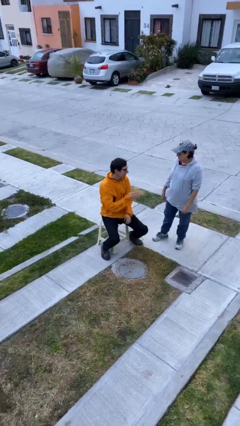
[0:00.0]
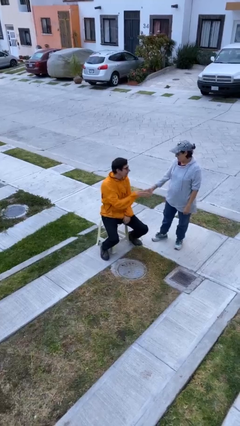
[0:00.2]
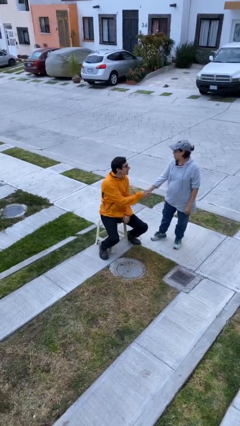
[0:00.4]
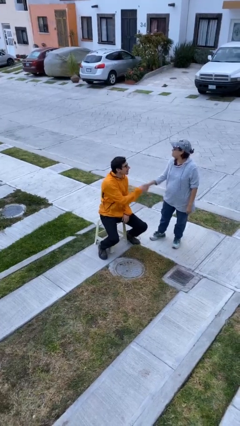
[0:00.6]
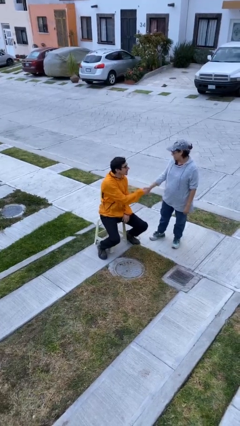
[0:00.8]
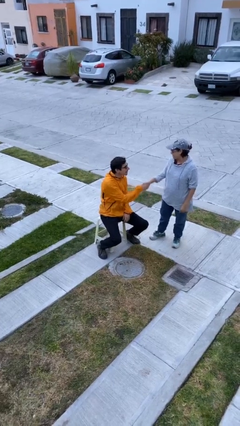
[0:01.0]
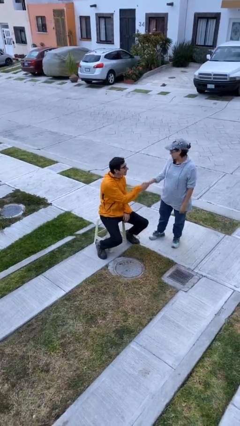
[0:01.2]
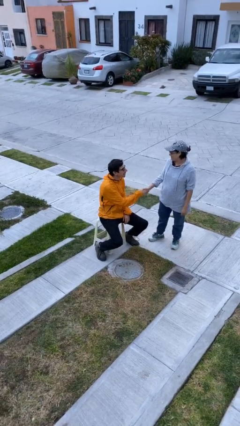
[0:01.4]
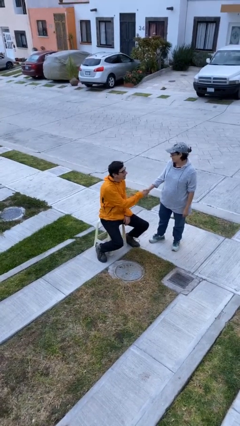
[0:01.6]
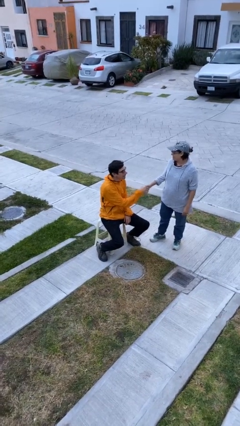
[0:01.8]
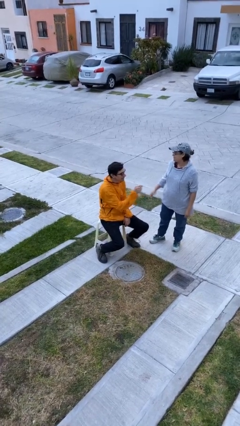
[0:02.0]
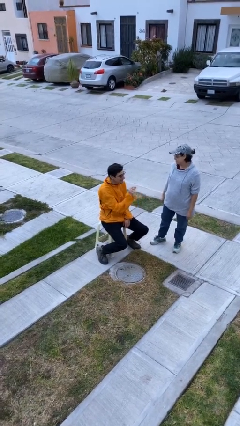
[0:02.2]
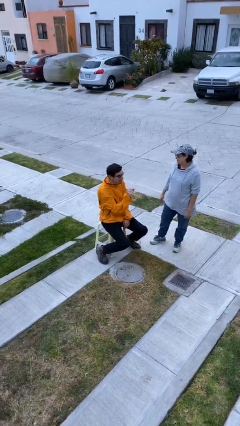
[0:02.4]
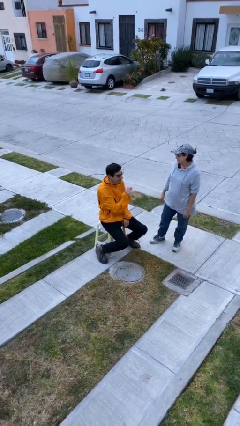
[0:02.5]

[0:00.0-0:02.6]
person shakes hand

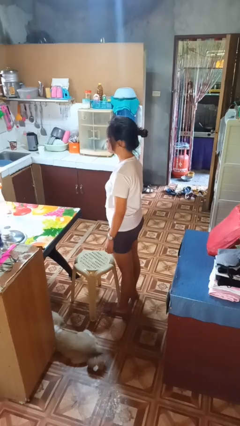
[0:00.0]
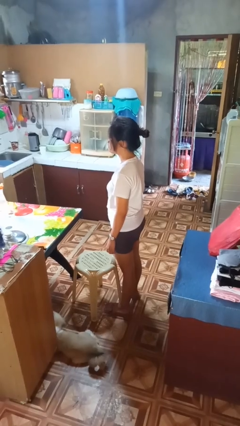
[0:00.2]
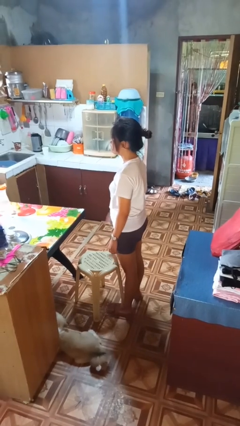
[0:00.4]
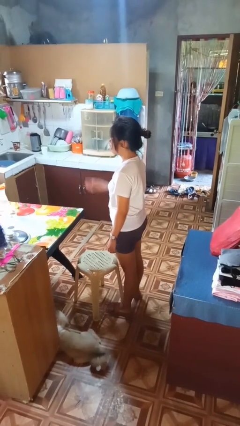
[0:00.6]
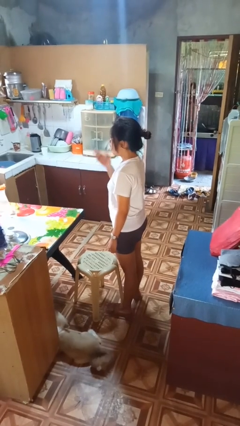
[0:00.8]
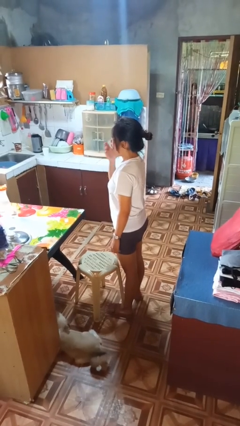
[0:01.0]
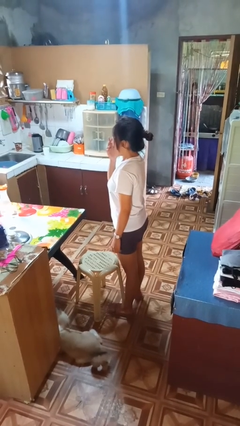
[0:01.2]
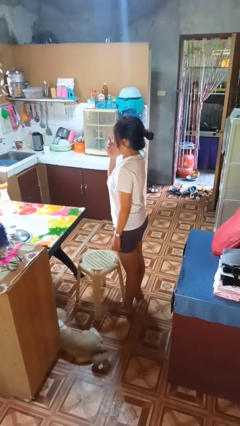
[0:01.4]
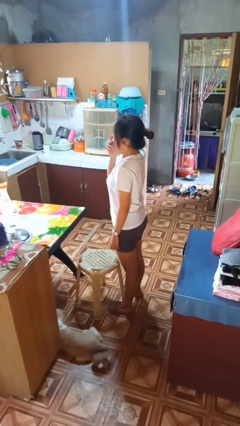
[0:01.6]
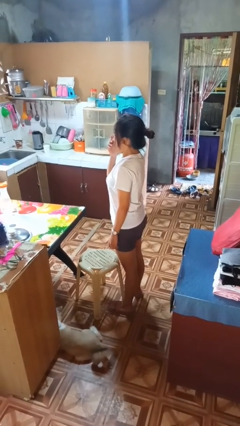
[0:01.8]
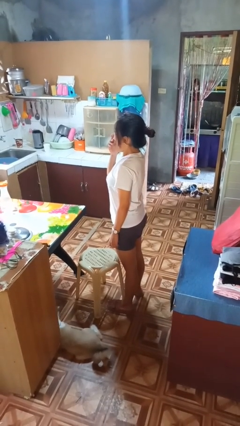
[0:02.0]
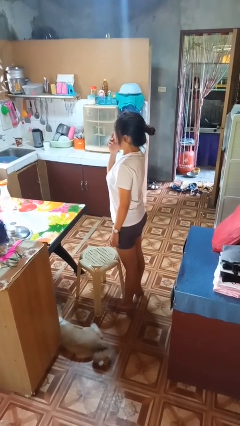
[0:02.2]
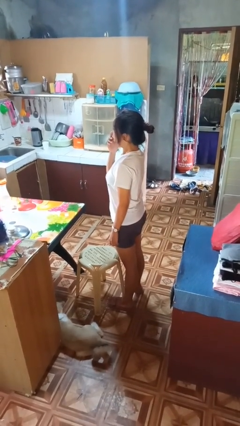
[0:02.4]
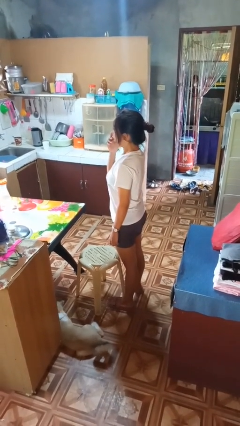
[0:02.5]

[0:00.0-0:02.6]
person yawns

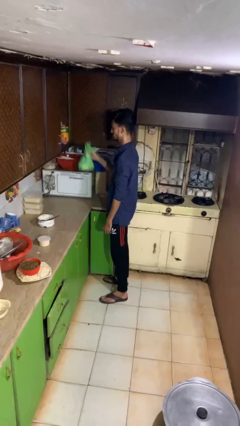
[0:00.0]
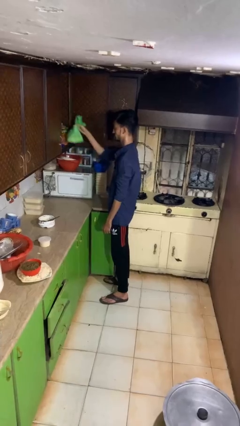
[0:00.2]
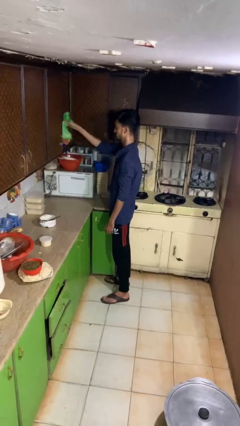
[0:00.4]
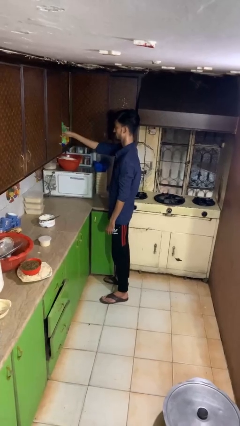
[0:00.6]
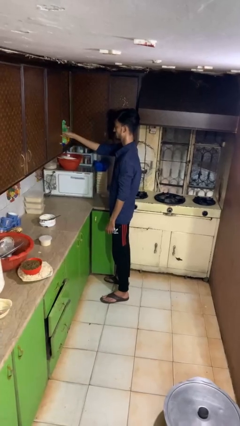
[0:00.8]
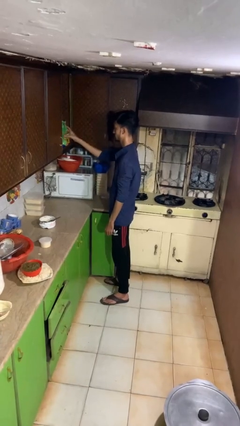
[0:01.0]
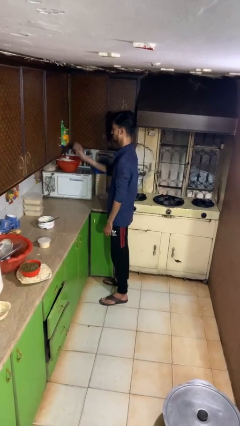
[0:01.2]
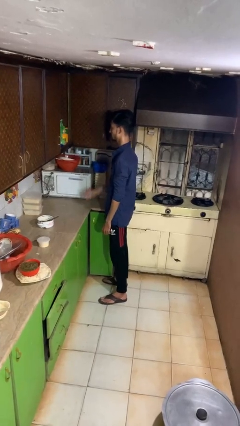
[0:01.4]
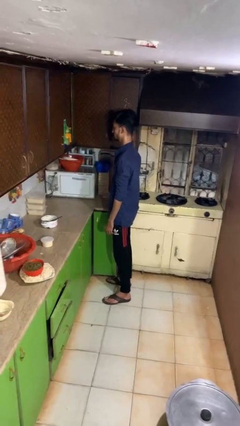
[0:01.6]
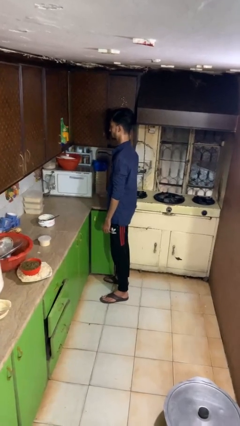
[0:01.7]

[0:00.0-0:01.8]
person loads groceries into cabinet

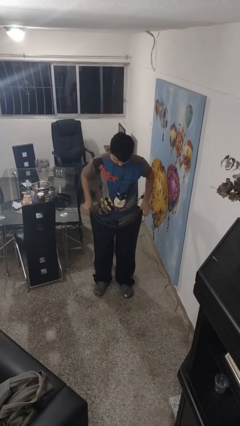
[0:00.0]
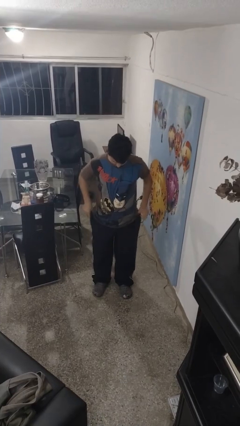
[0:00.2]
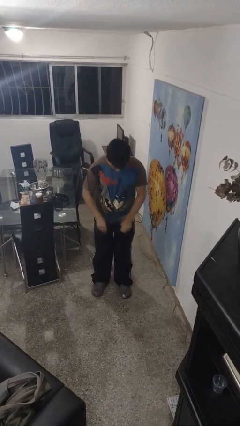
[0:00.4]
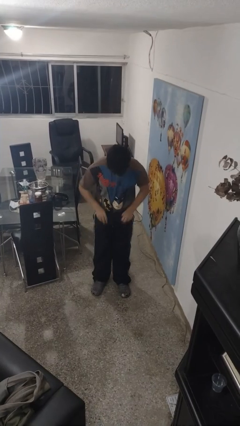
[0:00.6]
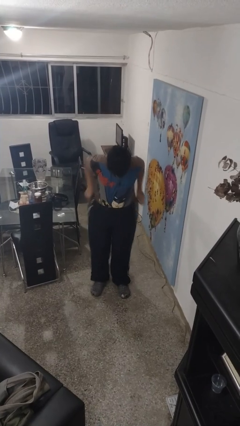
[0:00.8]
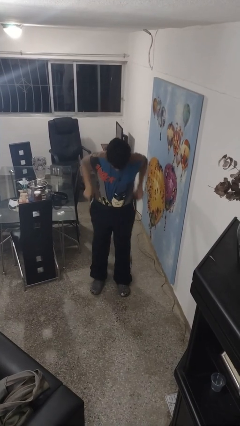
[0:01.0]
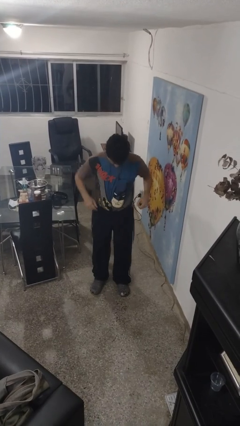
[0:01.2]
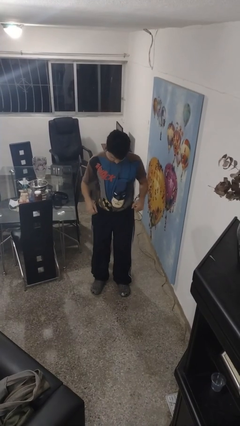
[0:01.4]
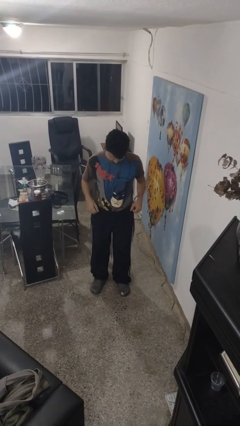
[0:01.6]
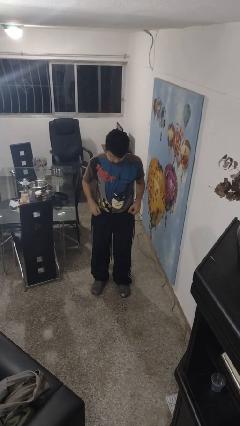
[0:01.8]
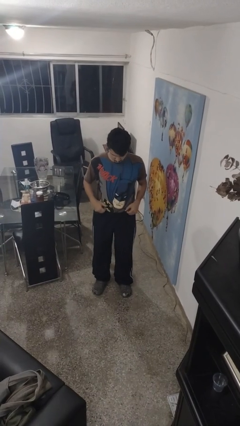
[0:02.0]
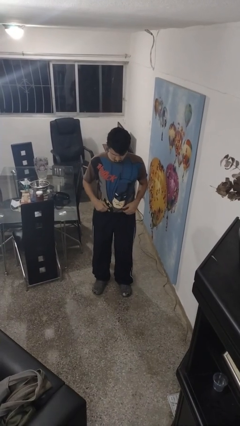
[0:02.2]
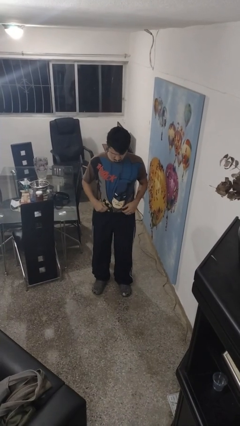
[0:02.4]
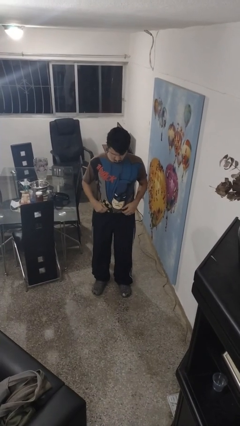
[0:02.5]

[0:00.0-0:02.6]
person tucks in shirt

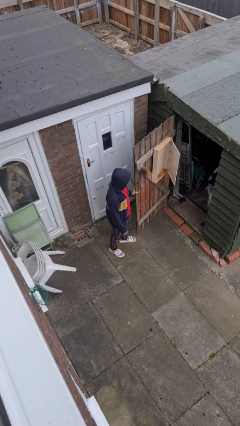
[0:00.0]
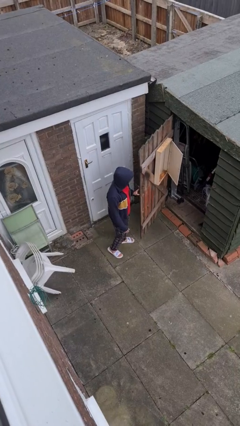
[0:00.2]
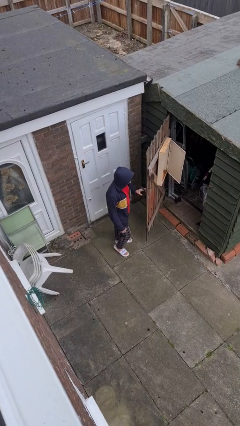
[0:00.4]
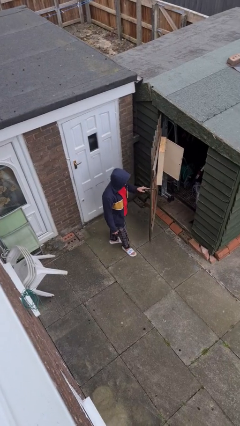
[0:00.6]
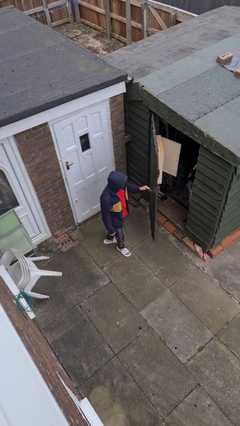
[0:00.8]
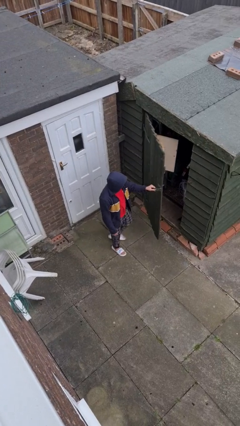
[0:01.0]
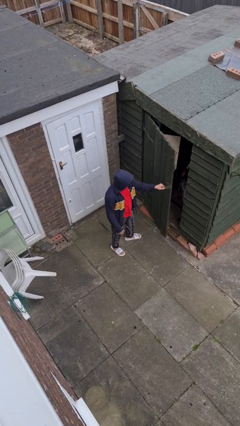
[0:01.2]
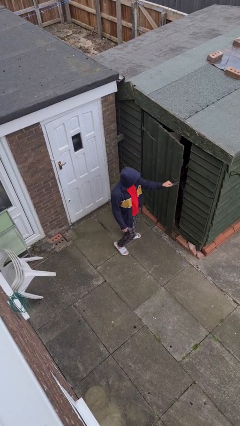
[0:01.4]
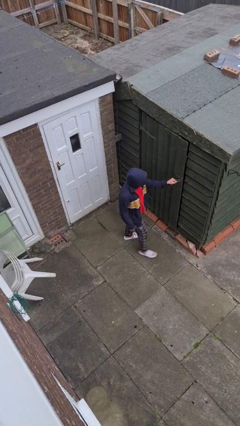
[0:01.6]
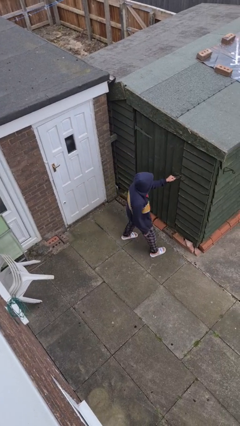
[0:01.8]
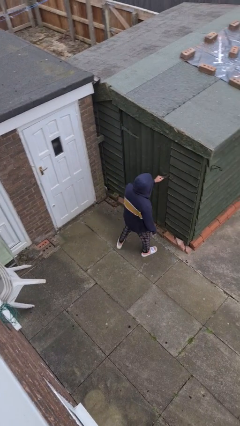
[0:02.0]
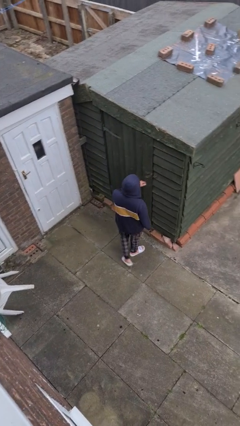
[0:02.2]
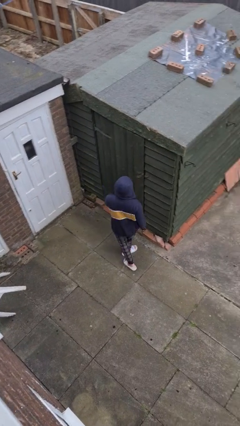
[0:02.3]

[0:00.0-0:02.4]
person closes facility door

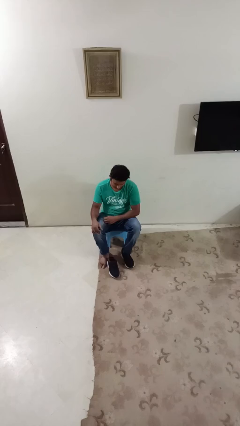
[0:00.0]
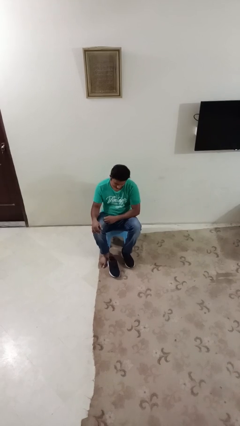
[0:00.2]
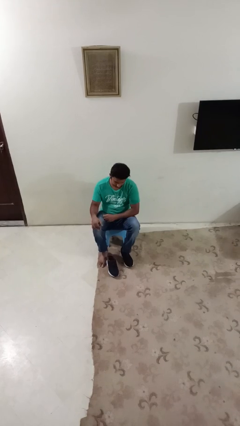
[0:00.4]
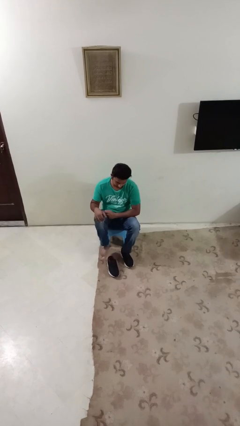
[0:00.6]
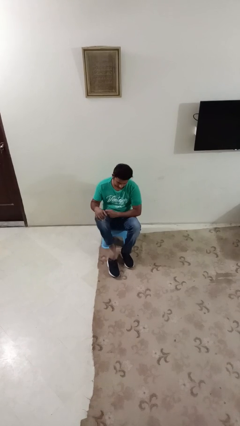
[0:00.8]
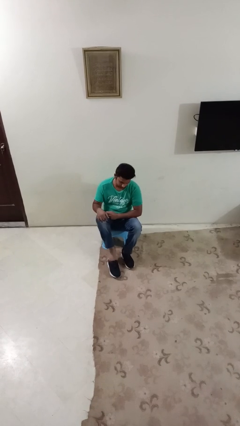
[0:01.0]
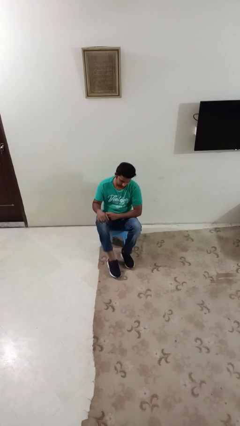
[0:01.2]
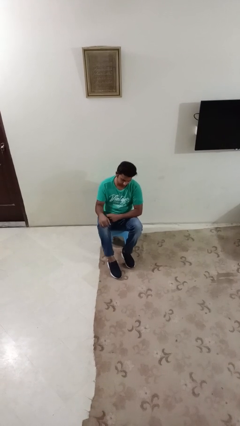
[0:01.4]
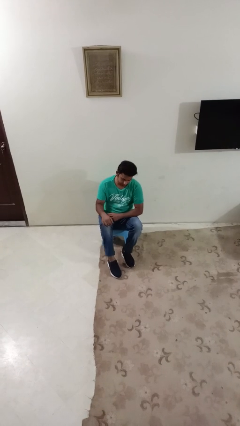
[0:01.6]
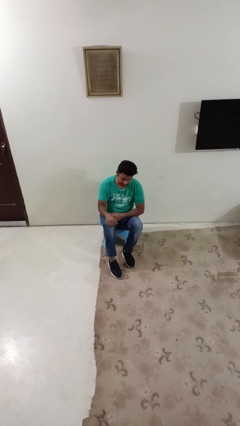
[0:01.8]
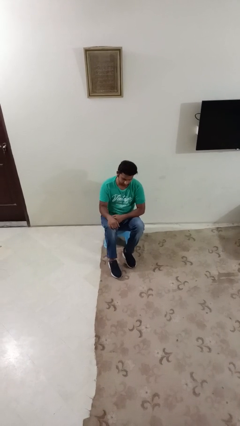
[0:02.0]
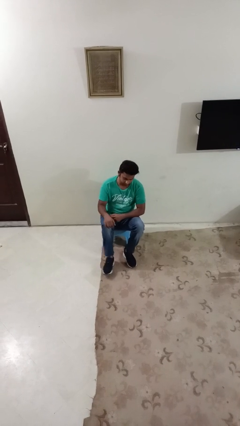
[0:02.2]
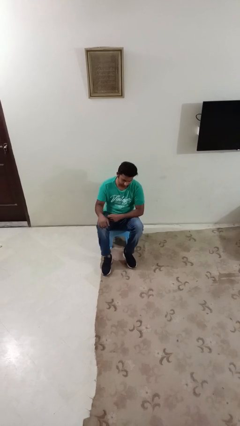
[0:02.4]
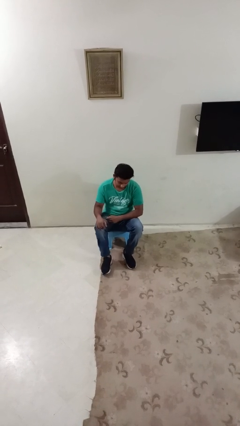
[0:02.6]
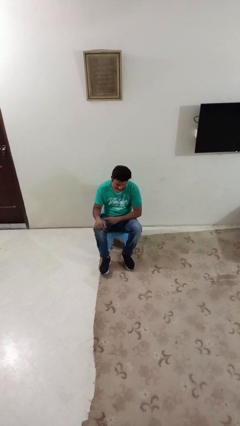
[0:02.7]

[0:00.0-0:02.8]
person puts on shoes

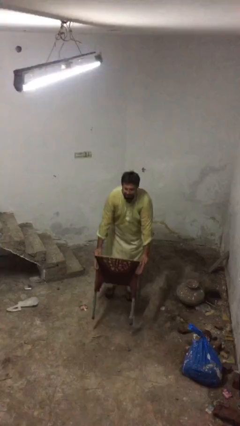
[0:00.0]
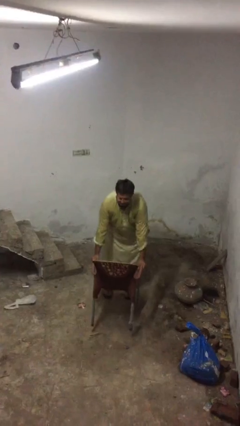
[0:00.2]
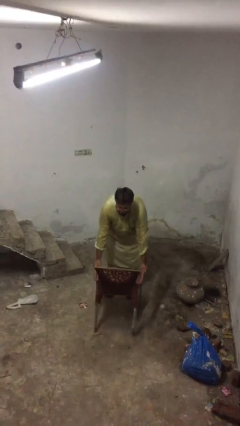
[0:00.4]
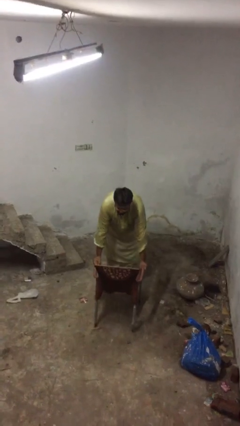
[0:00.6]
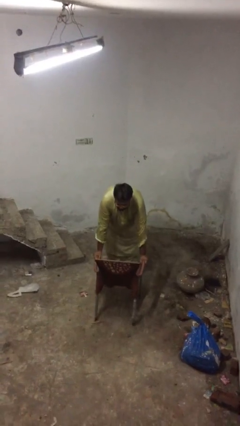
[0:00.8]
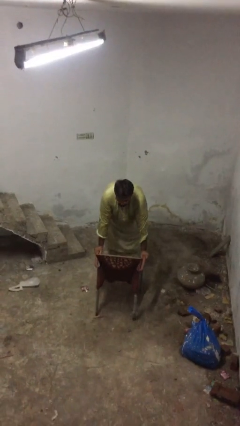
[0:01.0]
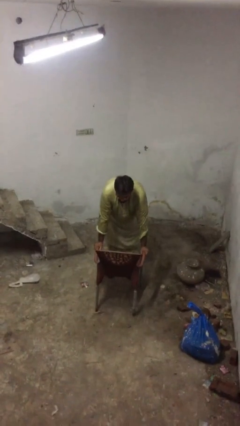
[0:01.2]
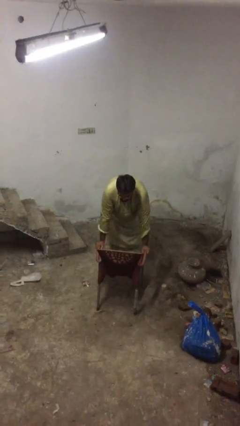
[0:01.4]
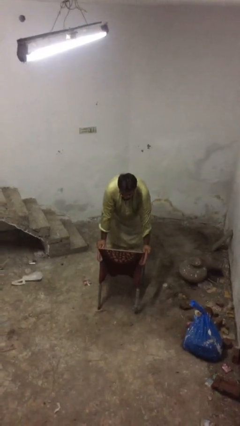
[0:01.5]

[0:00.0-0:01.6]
person puts down object on floor

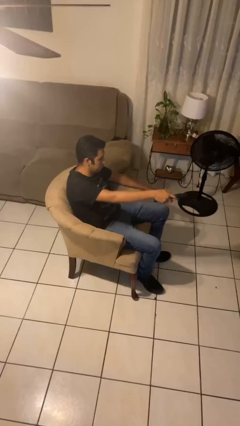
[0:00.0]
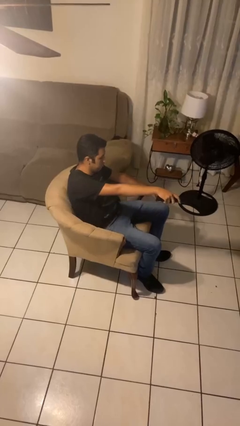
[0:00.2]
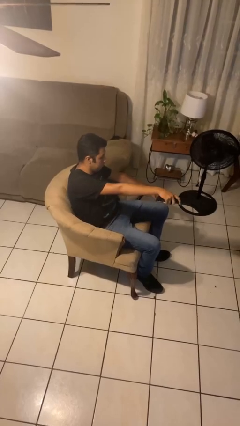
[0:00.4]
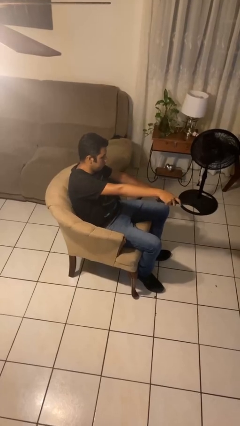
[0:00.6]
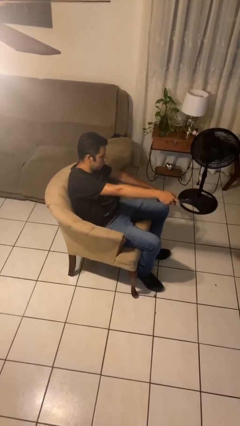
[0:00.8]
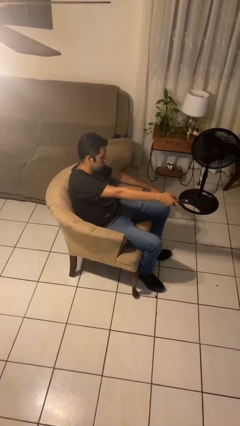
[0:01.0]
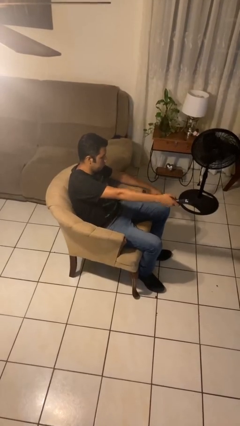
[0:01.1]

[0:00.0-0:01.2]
person uses television remote
